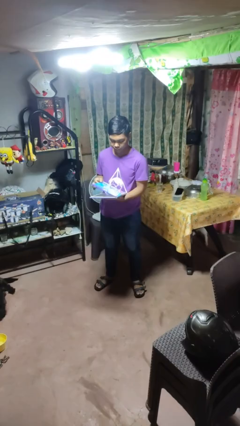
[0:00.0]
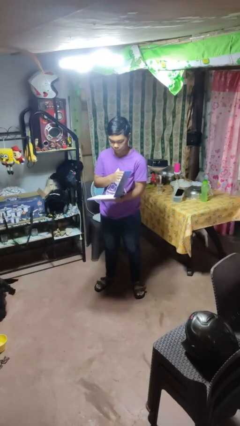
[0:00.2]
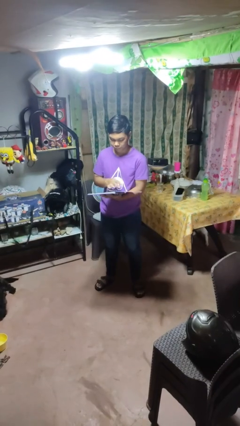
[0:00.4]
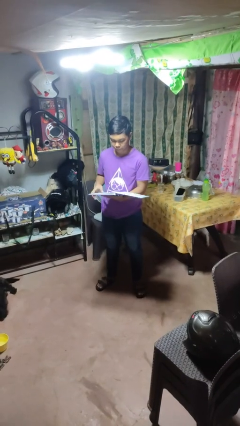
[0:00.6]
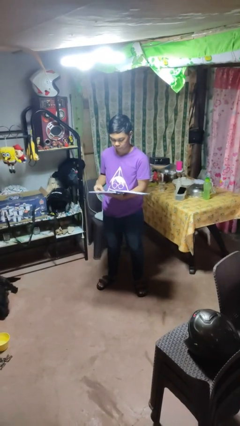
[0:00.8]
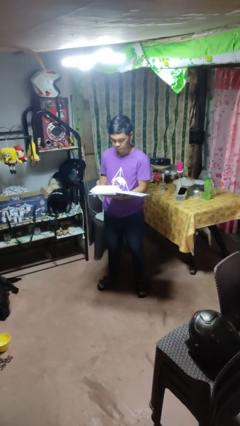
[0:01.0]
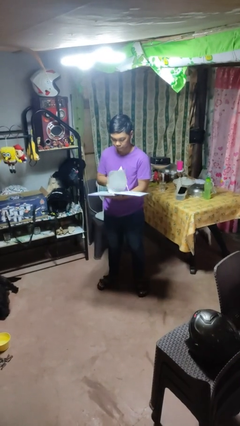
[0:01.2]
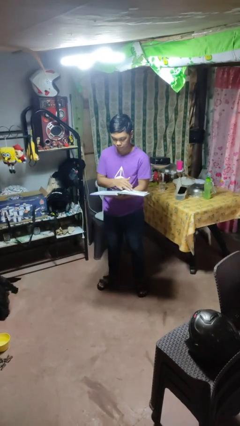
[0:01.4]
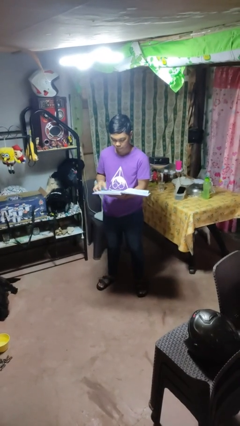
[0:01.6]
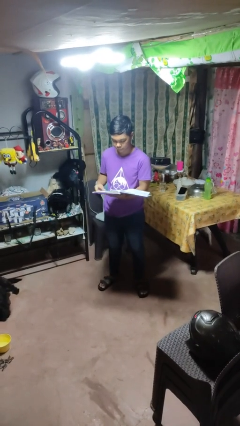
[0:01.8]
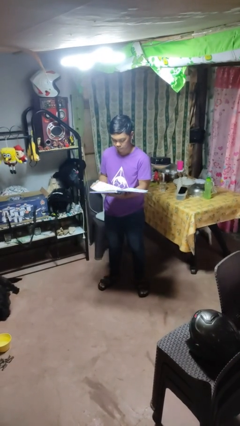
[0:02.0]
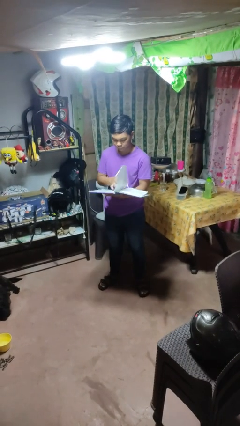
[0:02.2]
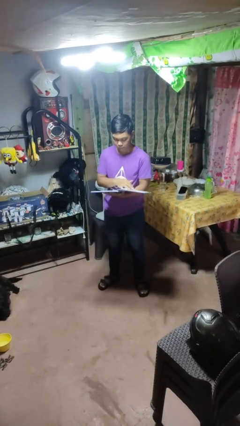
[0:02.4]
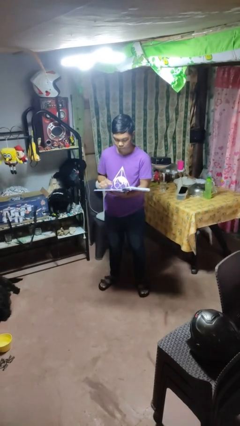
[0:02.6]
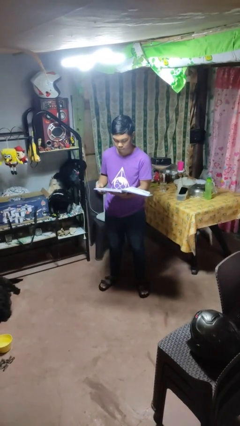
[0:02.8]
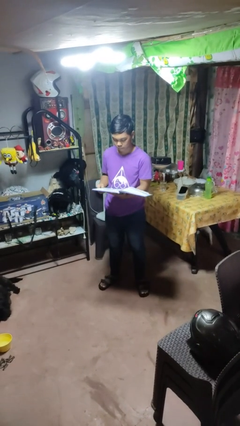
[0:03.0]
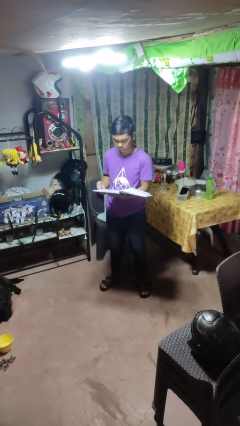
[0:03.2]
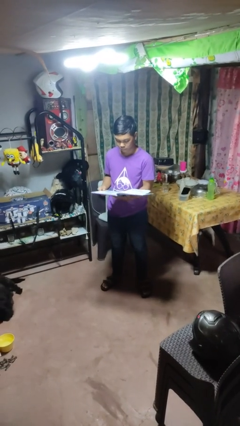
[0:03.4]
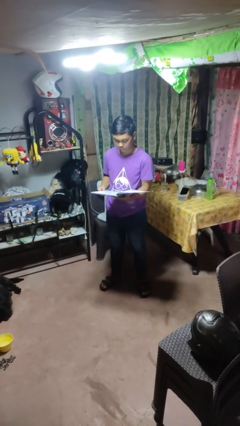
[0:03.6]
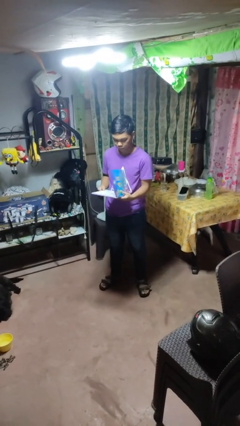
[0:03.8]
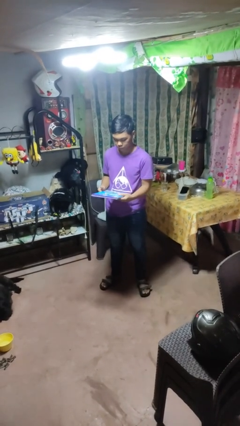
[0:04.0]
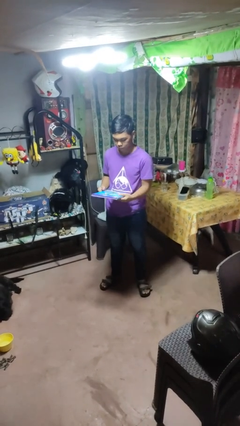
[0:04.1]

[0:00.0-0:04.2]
person reads magazine

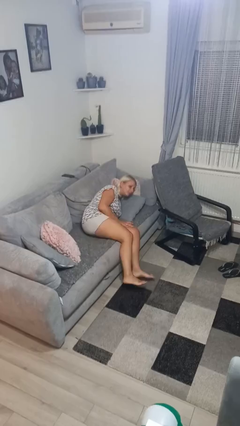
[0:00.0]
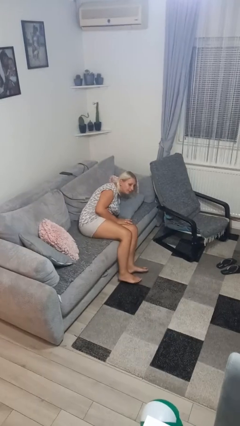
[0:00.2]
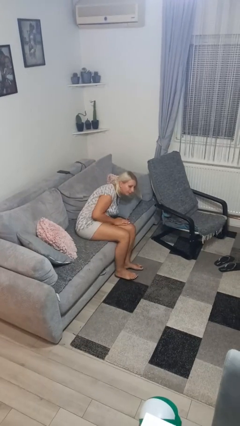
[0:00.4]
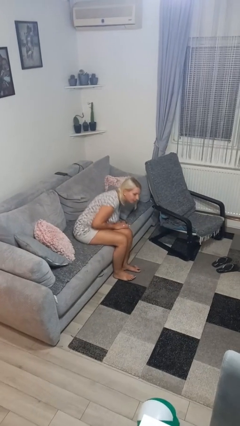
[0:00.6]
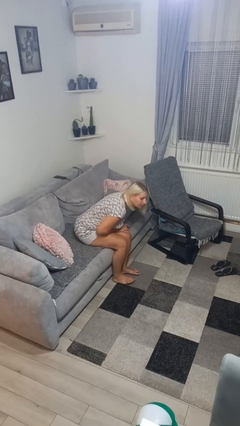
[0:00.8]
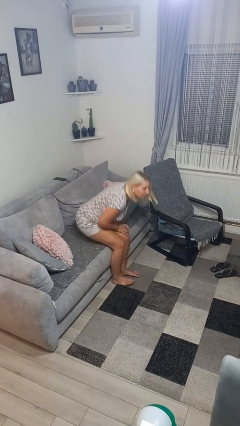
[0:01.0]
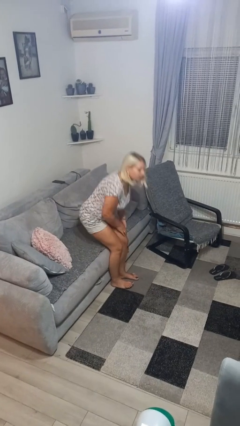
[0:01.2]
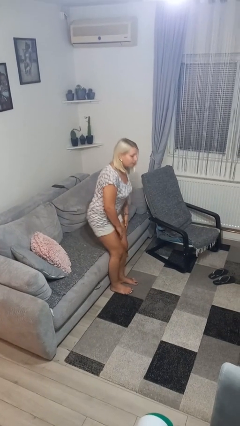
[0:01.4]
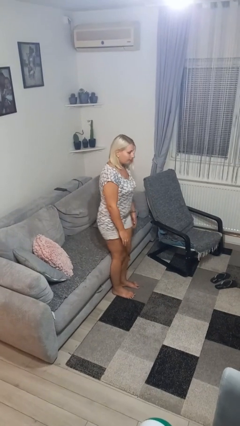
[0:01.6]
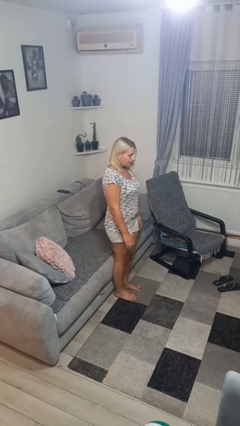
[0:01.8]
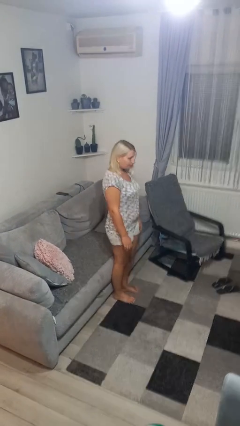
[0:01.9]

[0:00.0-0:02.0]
person stands up

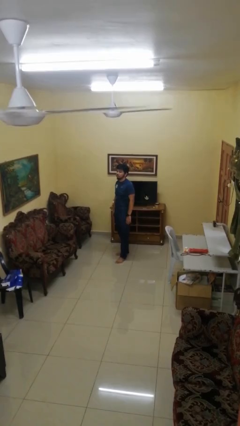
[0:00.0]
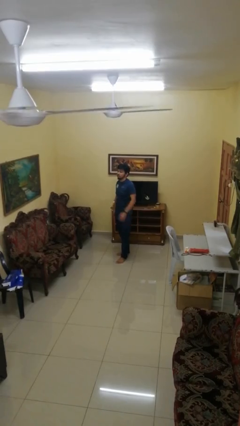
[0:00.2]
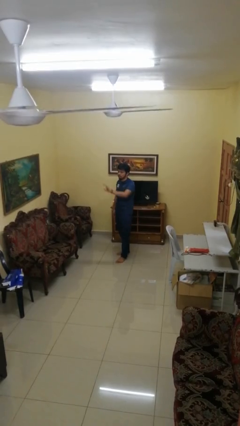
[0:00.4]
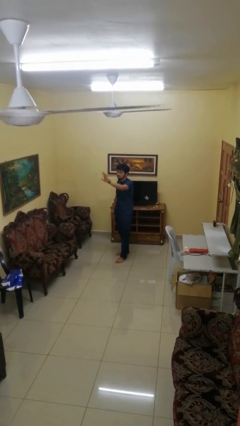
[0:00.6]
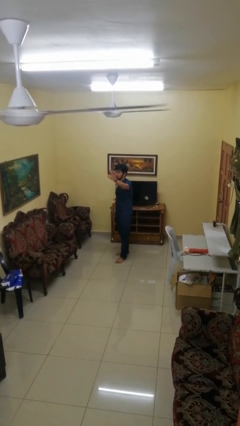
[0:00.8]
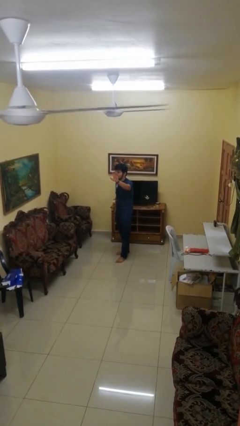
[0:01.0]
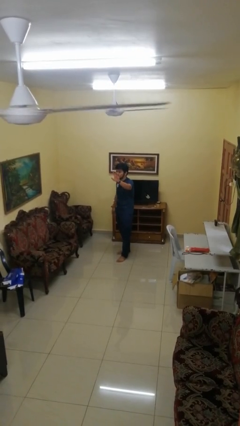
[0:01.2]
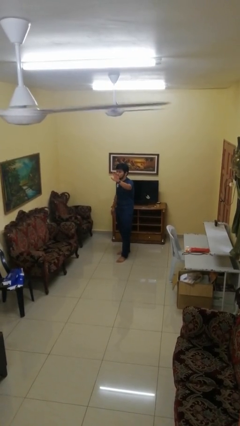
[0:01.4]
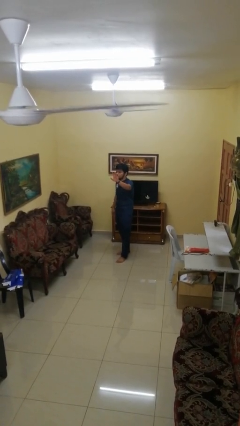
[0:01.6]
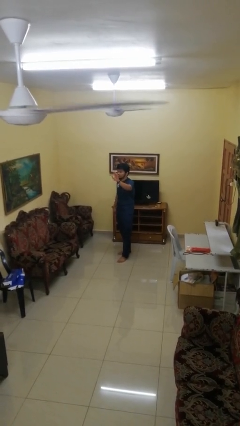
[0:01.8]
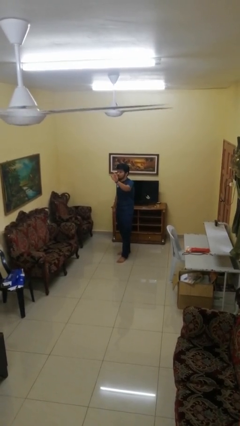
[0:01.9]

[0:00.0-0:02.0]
person gestures swipe left

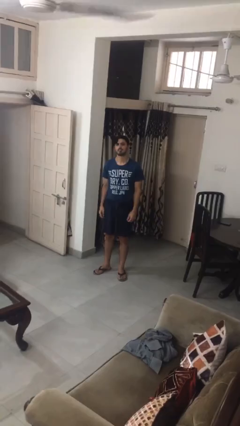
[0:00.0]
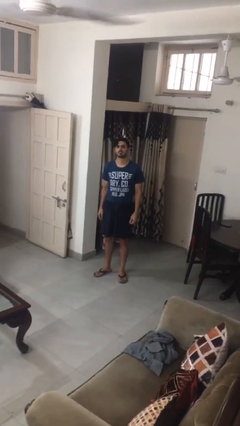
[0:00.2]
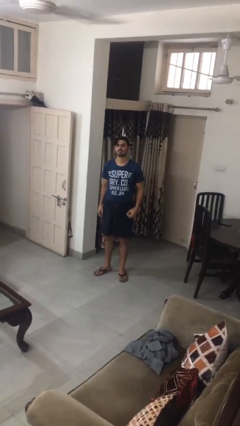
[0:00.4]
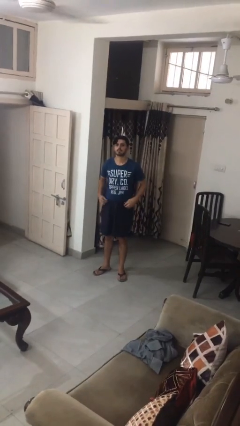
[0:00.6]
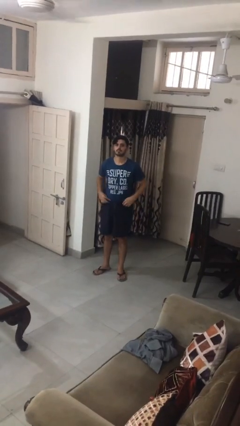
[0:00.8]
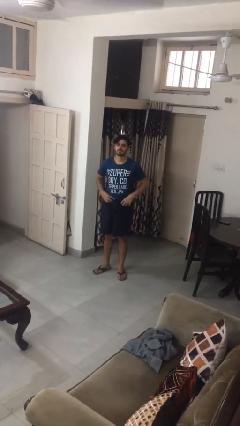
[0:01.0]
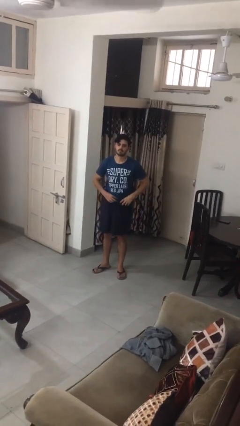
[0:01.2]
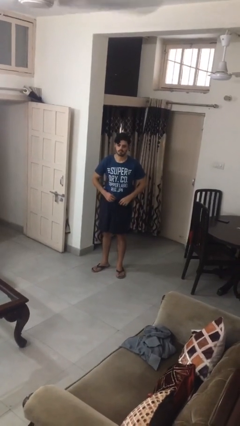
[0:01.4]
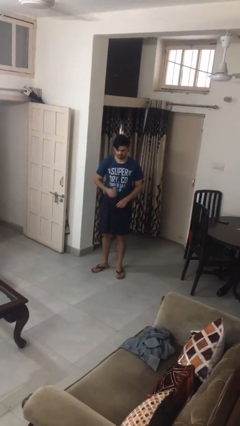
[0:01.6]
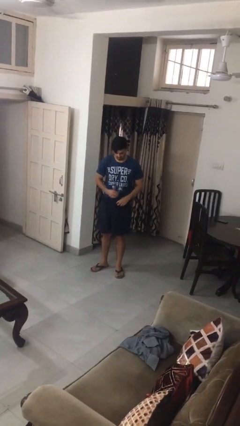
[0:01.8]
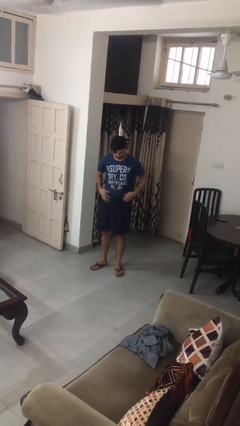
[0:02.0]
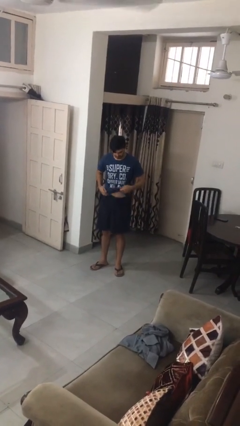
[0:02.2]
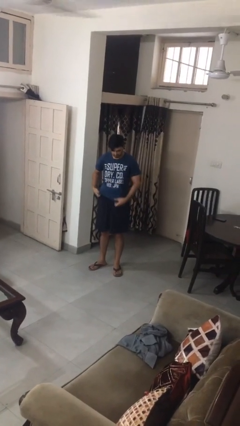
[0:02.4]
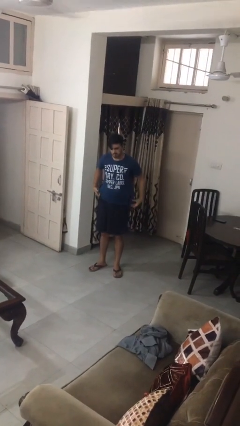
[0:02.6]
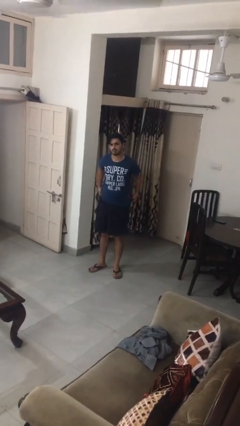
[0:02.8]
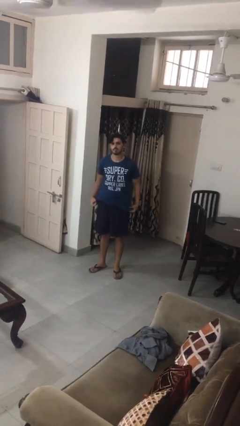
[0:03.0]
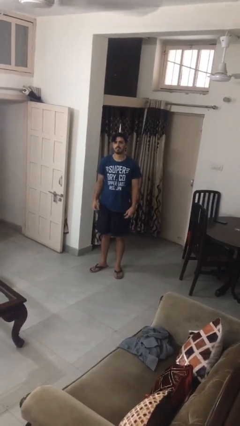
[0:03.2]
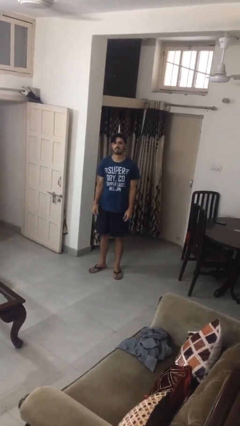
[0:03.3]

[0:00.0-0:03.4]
person untucks shirt

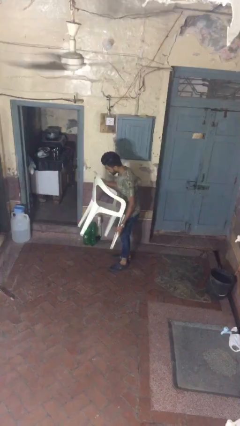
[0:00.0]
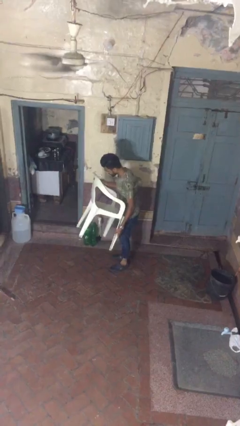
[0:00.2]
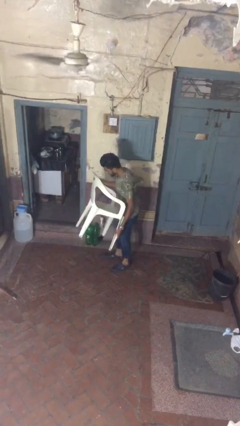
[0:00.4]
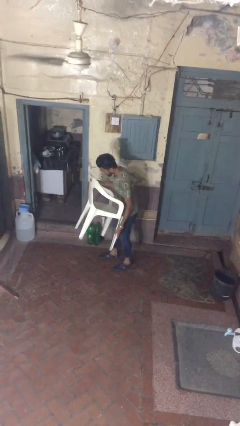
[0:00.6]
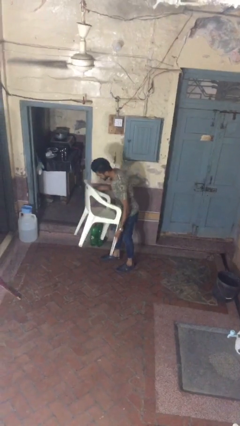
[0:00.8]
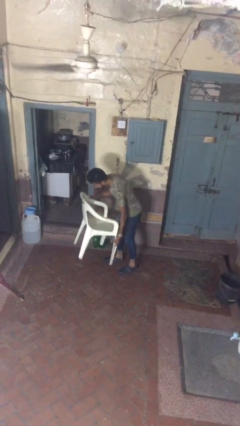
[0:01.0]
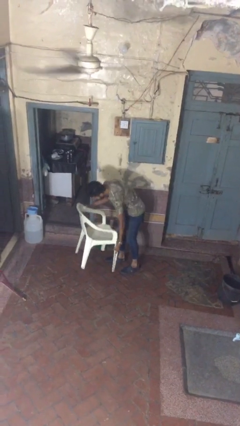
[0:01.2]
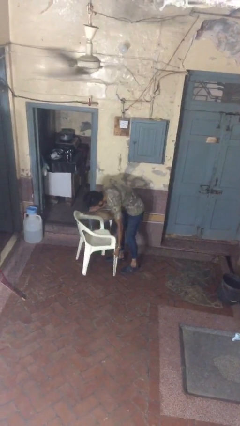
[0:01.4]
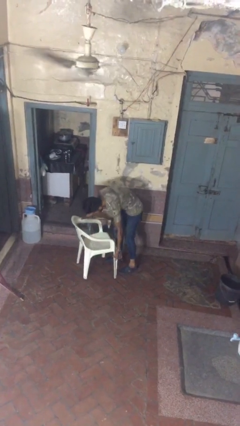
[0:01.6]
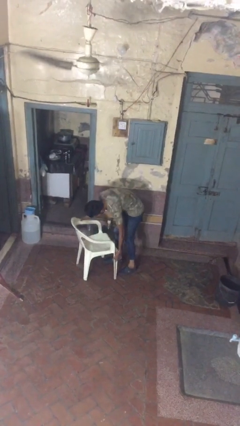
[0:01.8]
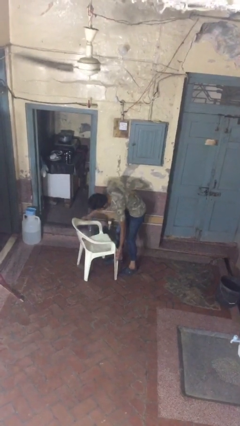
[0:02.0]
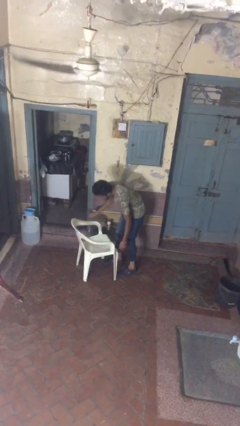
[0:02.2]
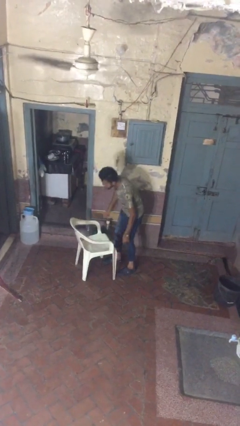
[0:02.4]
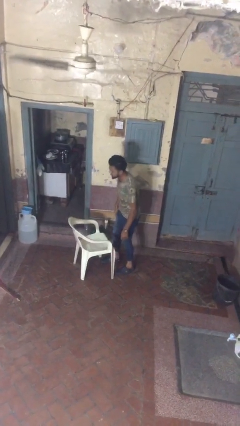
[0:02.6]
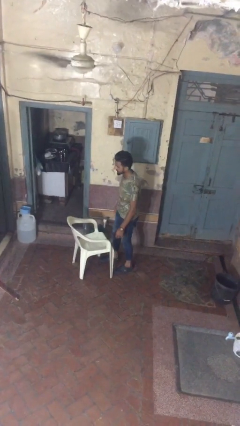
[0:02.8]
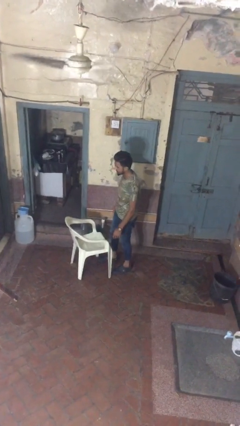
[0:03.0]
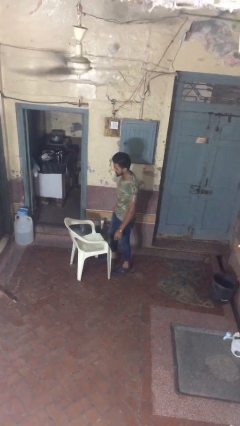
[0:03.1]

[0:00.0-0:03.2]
person puts down object on floor

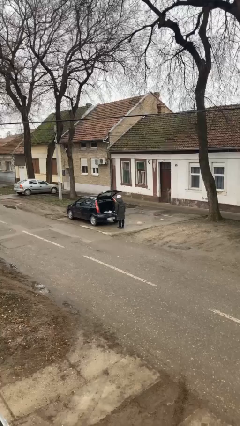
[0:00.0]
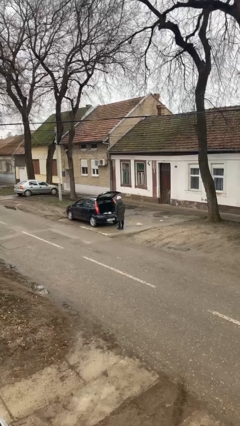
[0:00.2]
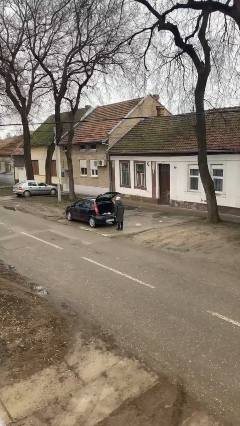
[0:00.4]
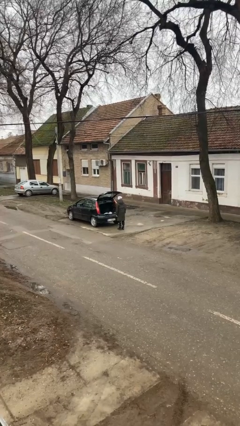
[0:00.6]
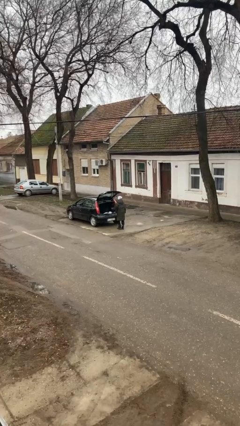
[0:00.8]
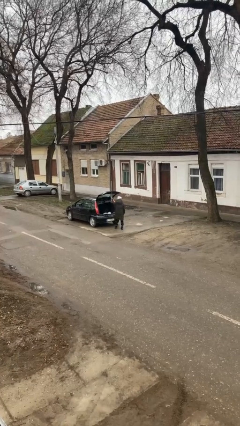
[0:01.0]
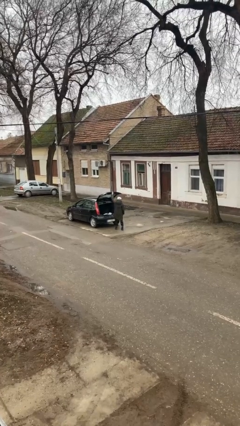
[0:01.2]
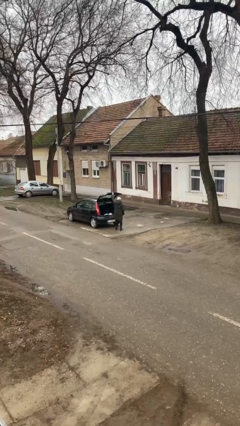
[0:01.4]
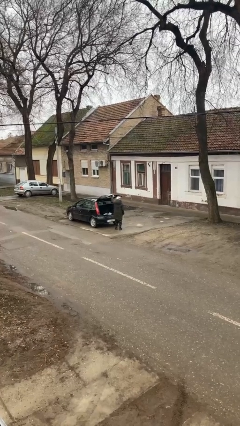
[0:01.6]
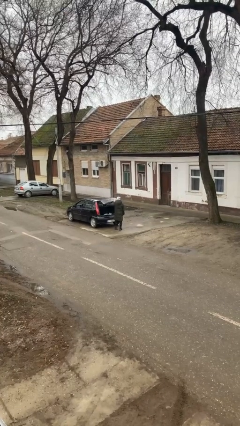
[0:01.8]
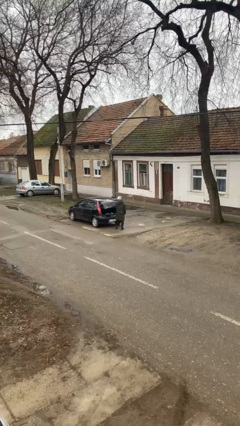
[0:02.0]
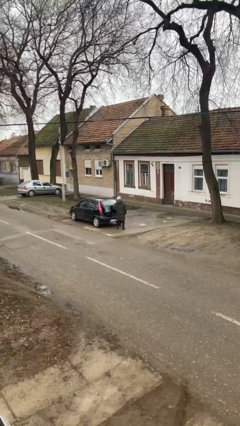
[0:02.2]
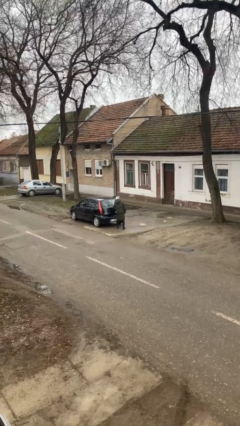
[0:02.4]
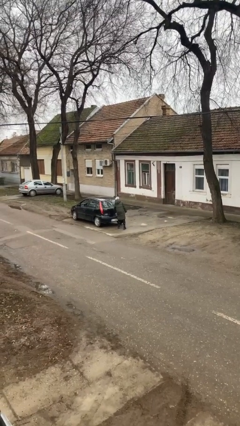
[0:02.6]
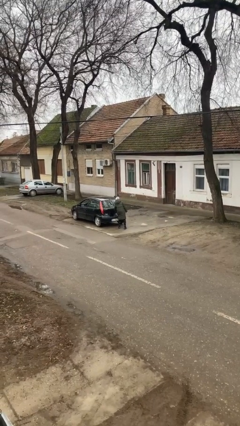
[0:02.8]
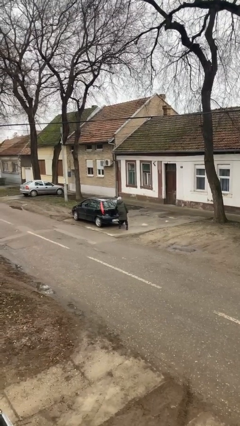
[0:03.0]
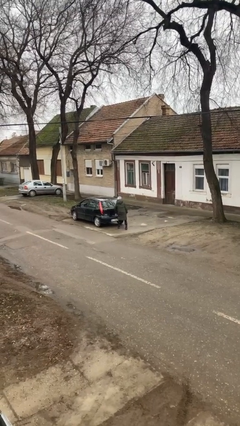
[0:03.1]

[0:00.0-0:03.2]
person closes car trunk
